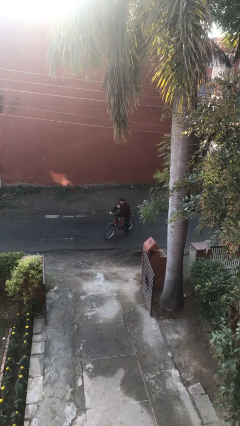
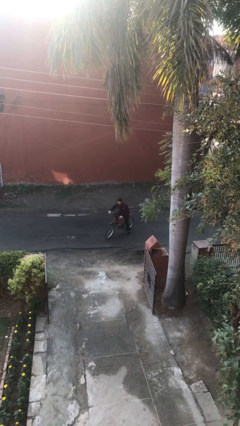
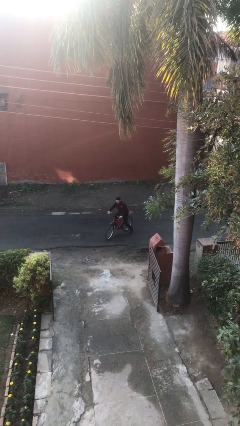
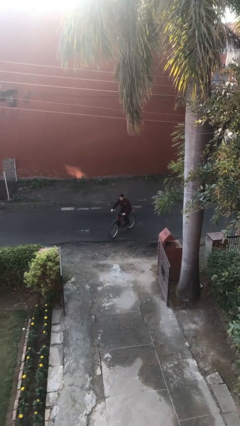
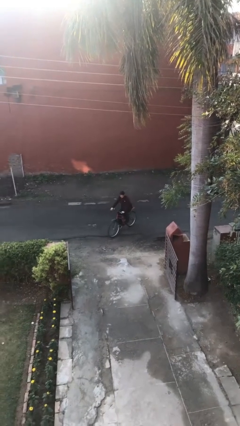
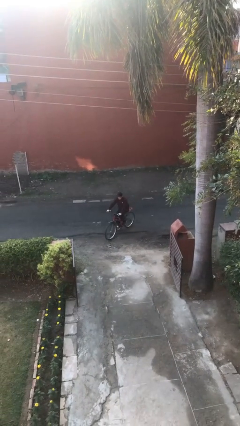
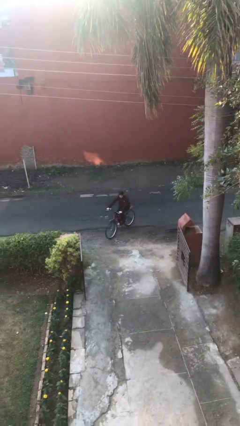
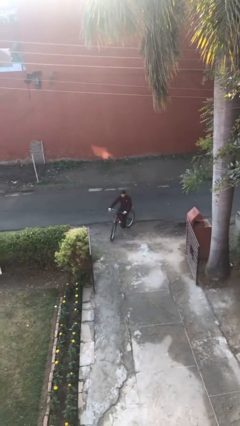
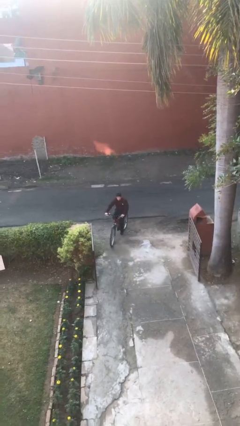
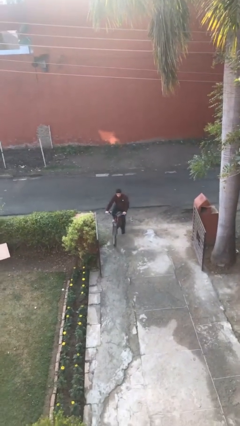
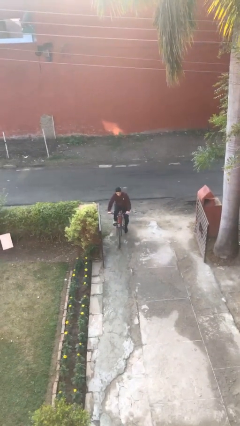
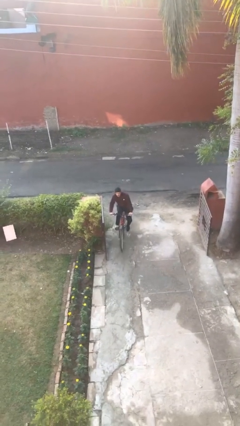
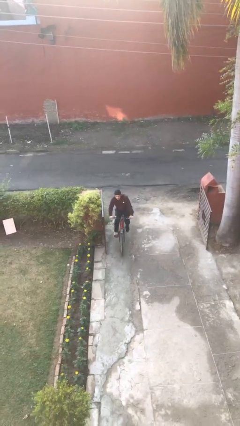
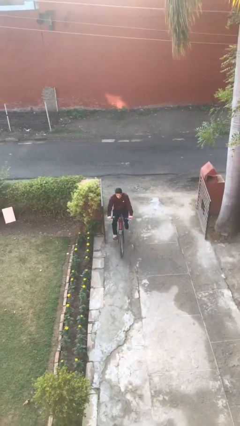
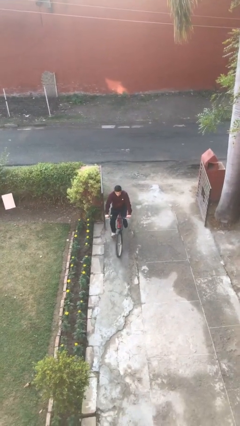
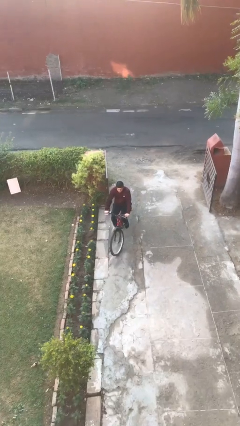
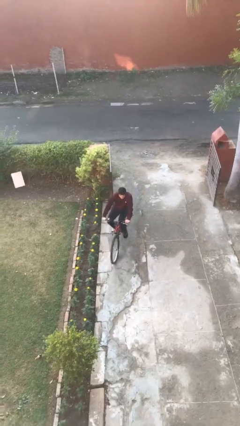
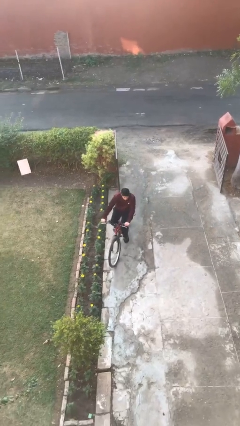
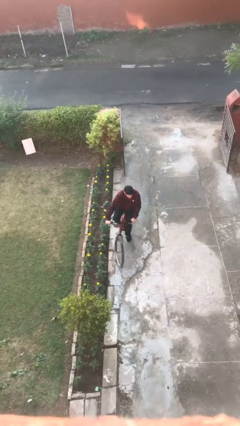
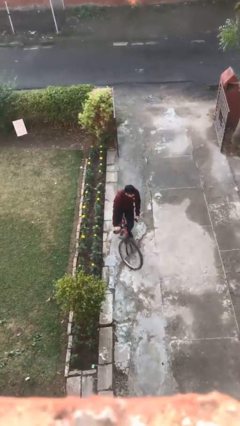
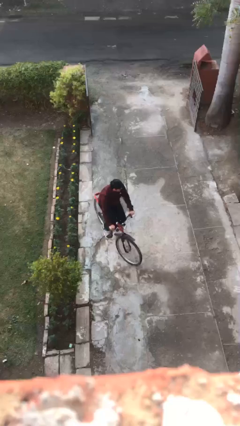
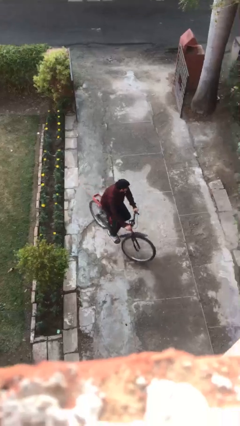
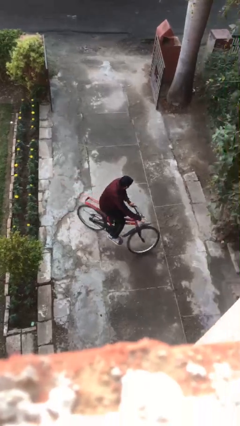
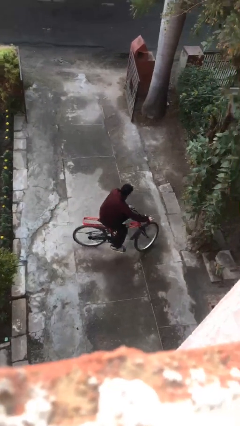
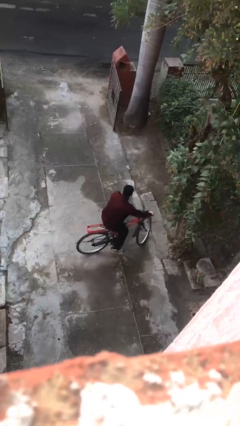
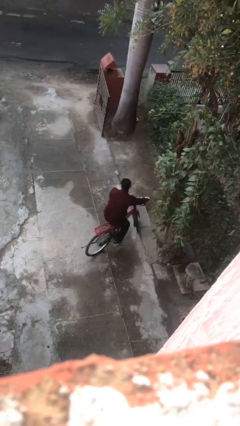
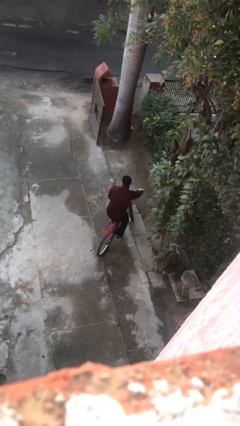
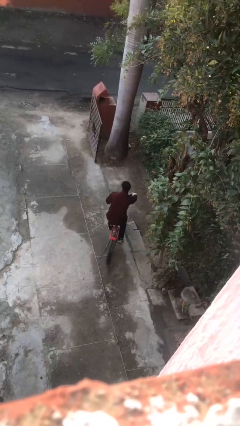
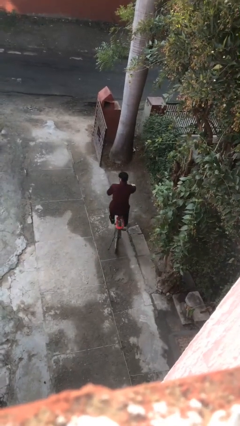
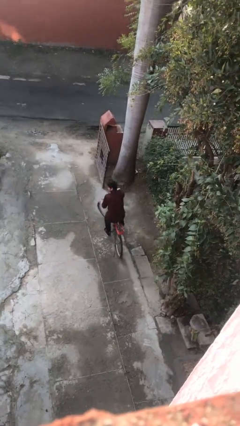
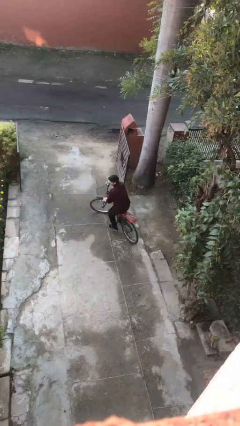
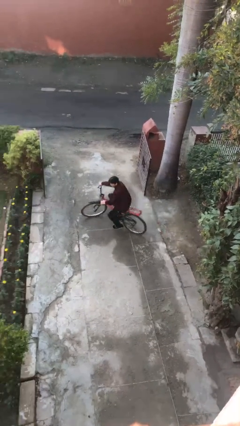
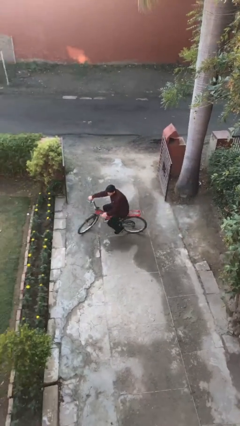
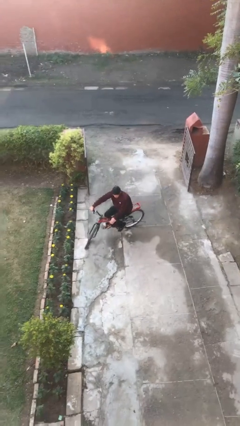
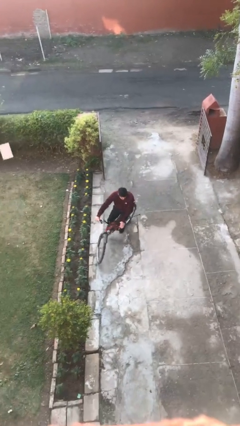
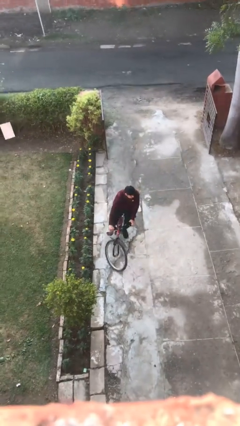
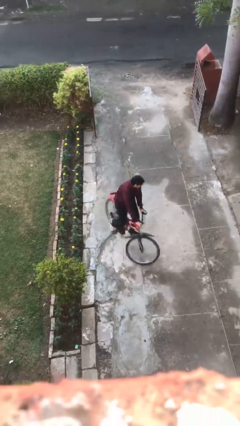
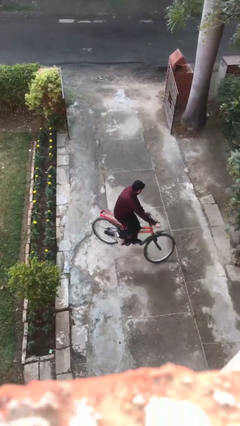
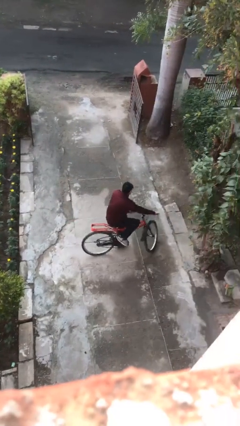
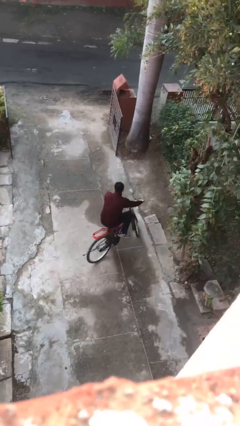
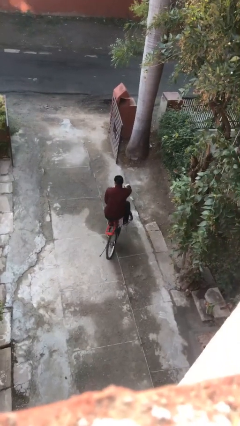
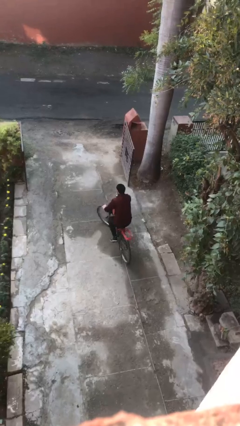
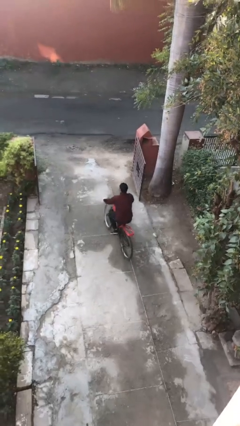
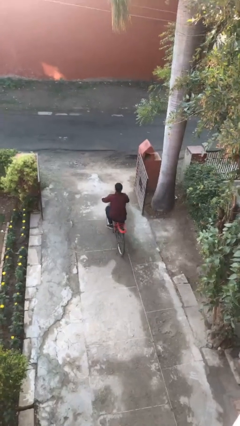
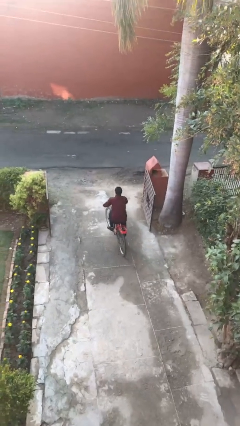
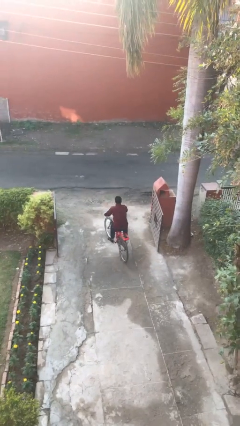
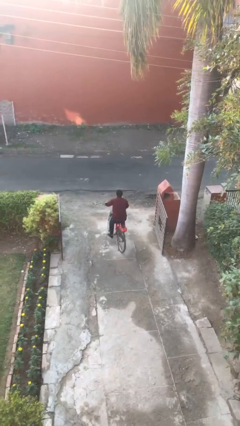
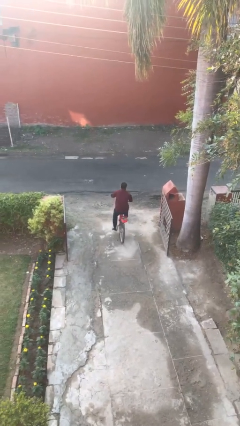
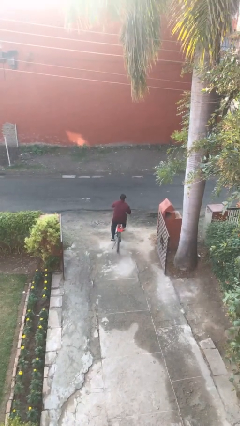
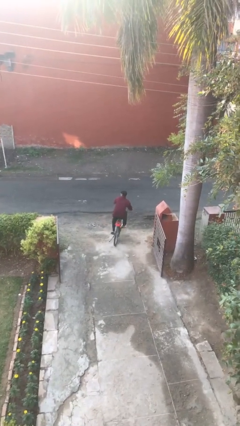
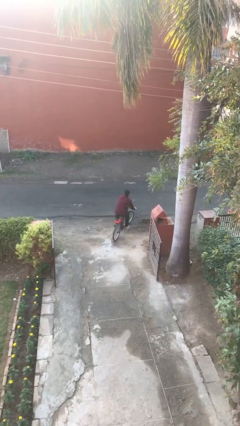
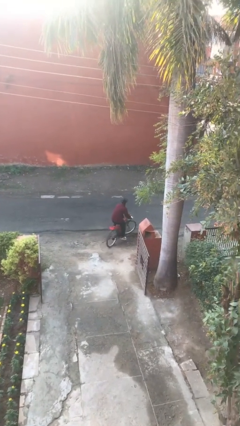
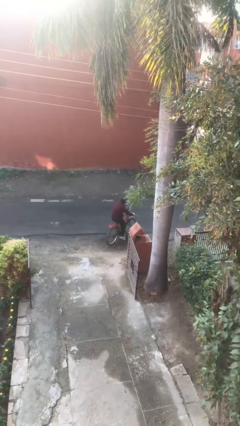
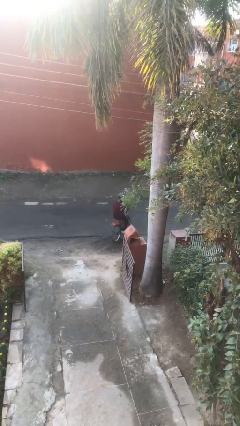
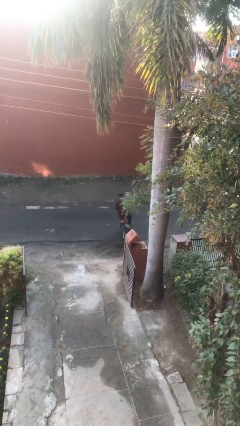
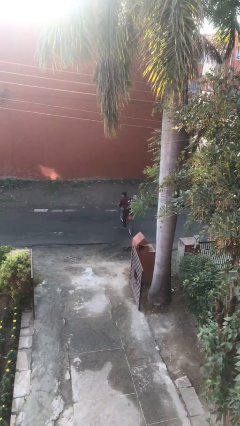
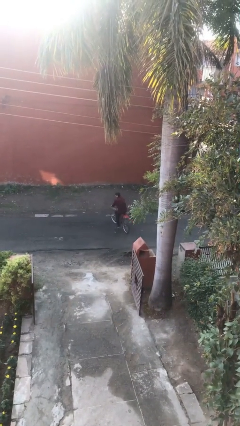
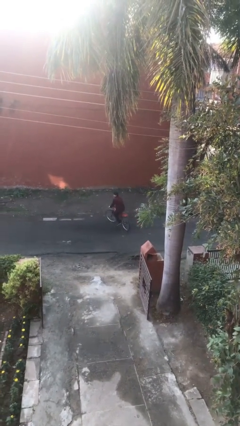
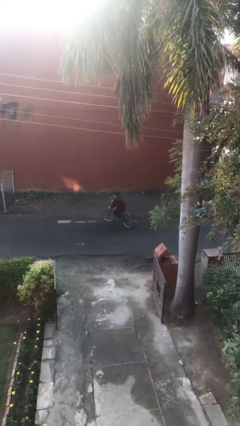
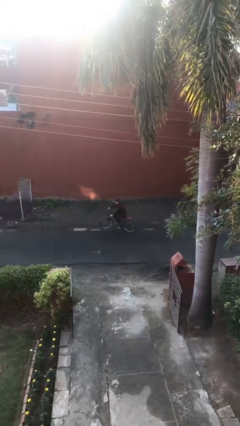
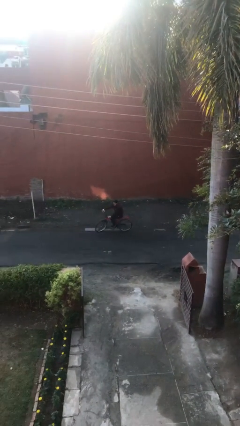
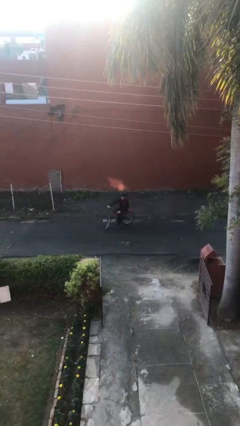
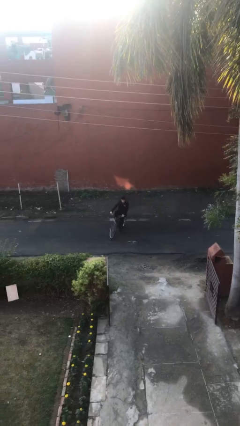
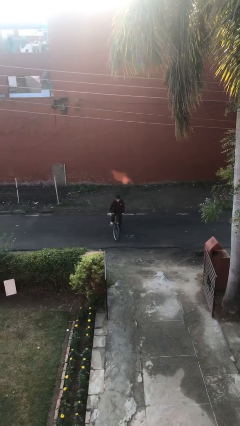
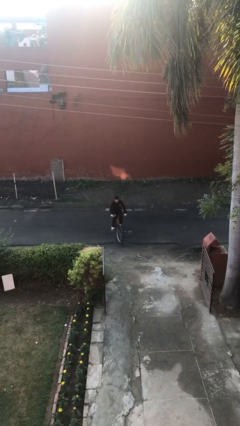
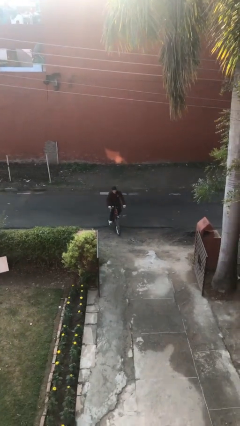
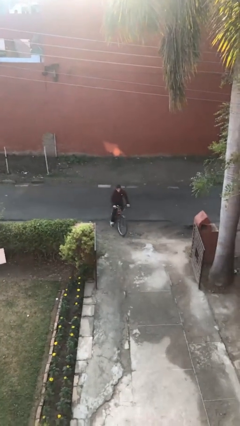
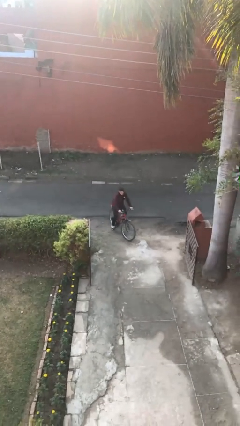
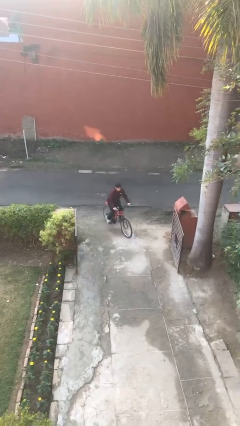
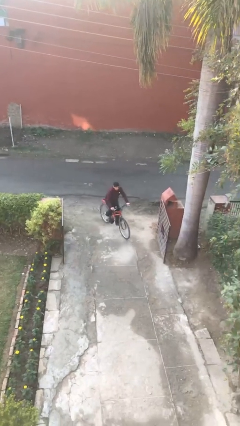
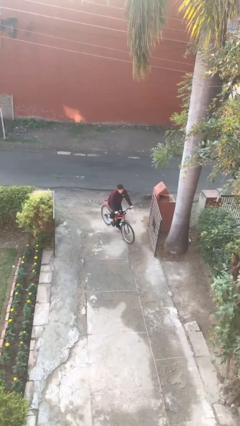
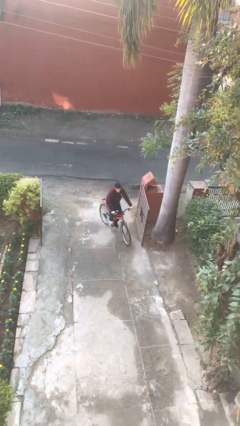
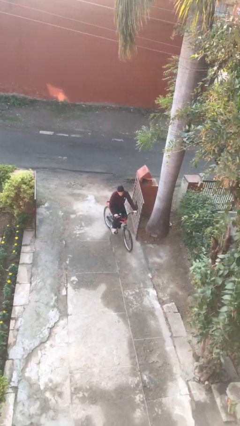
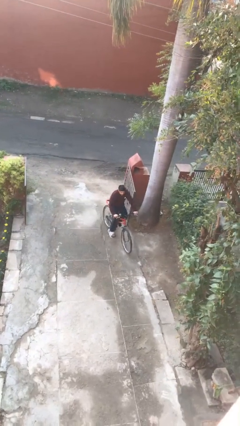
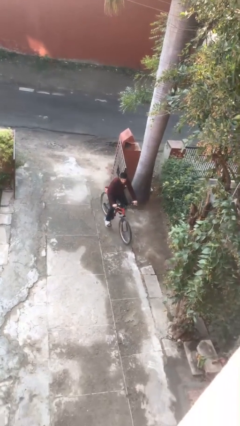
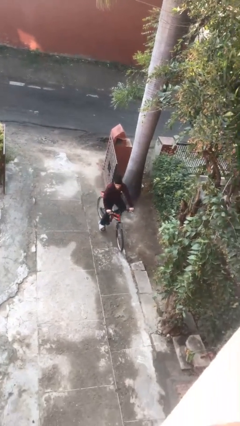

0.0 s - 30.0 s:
person rides bicycle

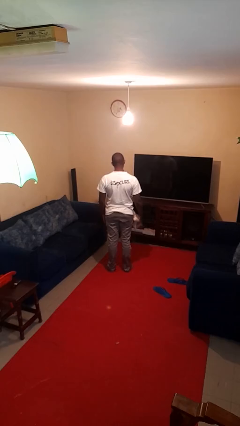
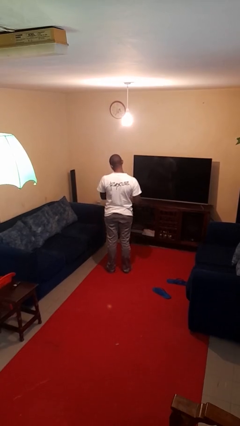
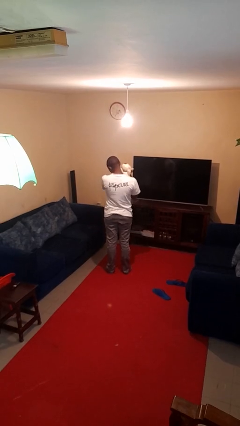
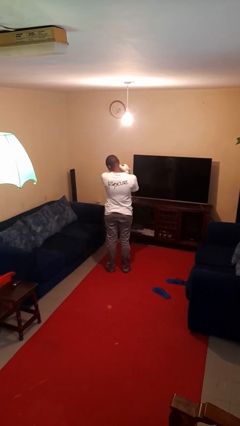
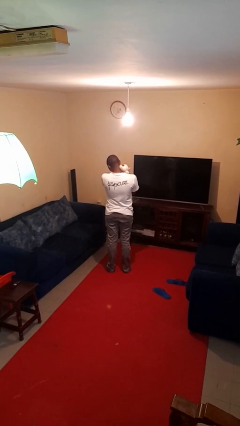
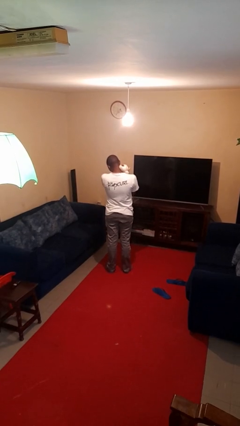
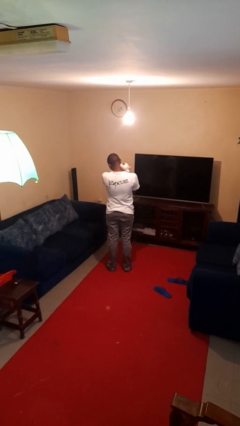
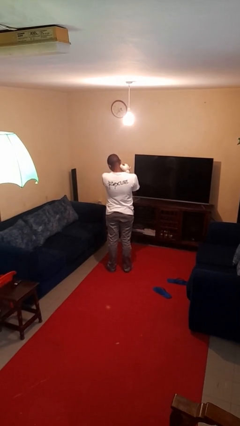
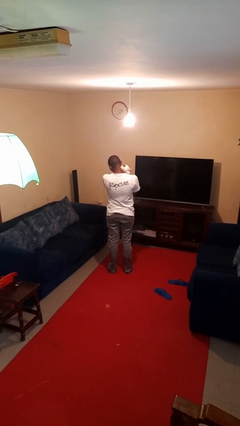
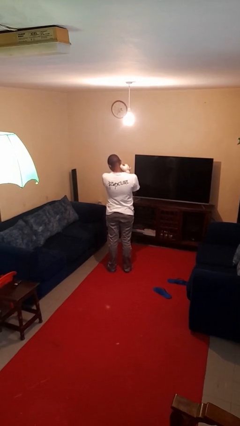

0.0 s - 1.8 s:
person hugs stuffed animal

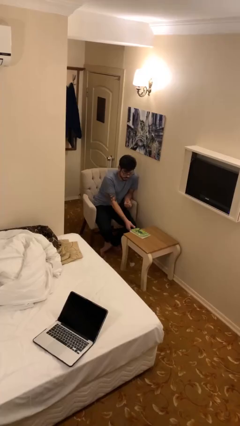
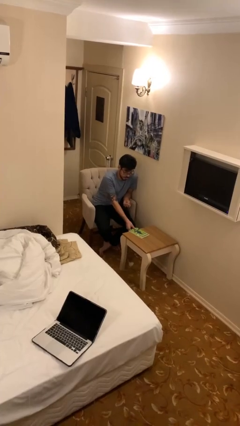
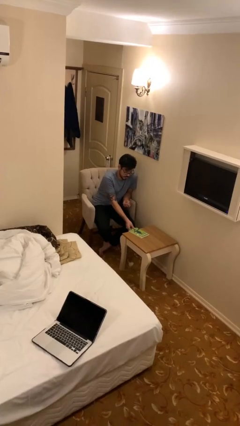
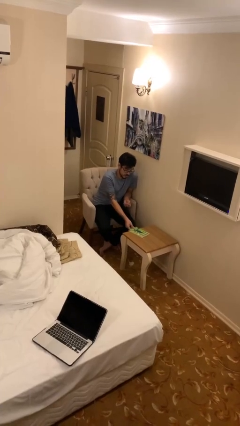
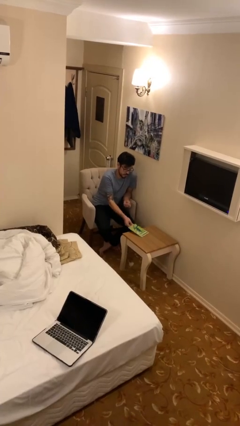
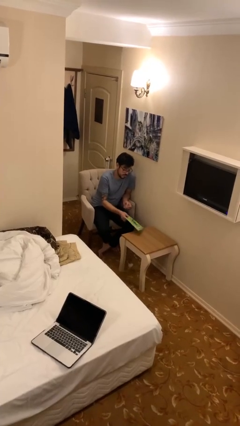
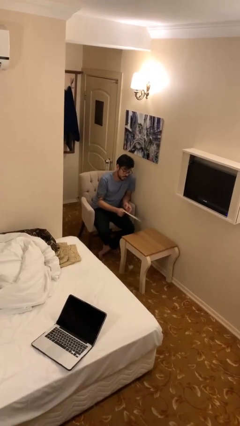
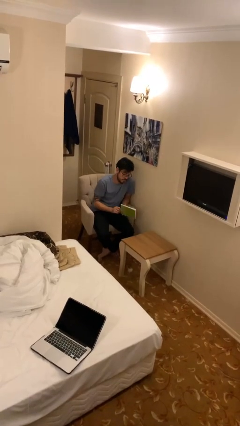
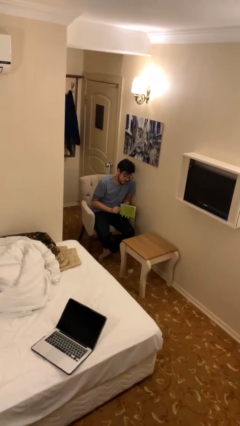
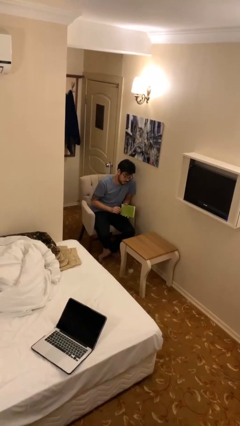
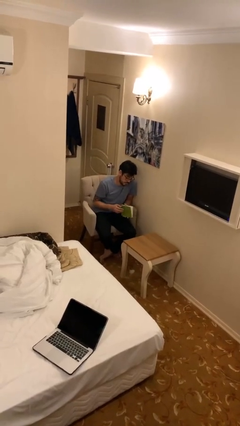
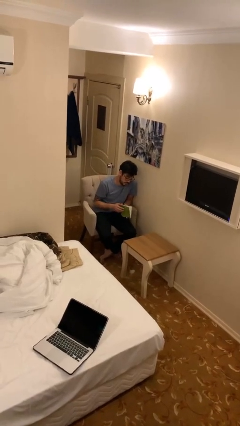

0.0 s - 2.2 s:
person picks up object from table
